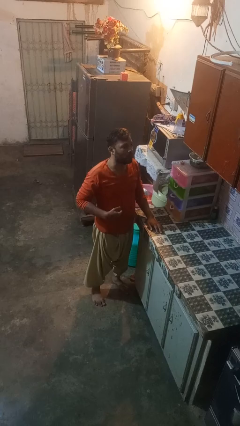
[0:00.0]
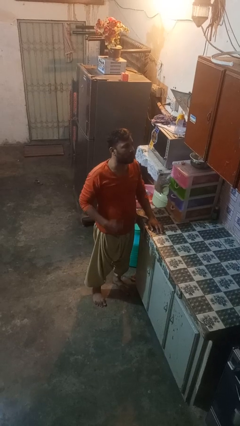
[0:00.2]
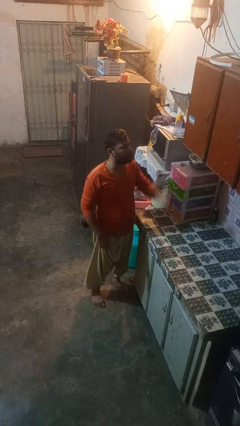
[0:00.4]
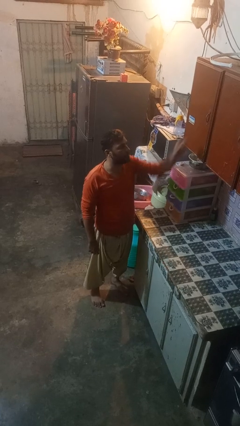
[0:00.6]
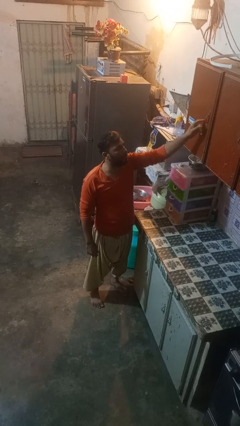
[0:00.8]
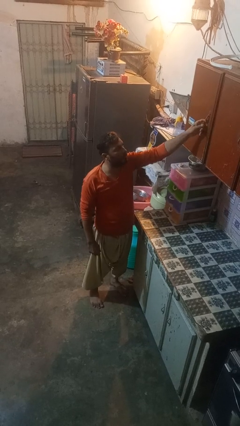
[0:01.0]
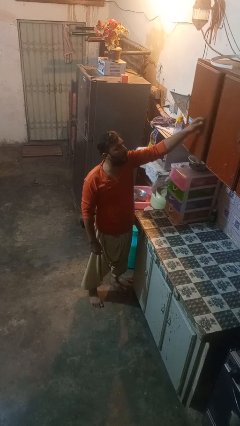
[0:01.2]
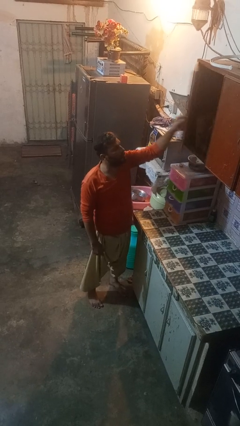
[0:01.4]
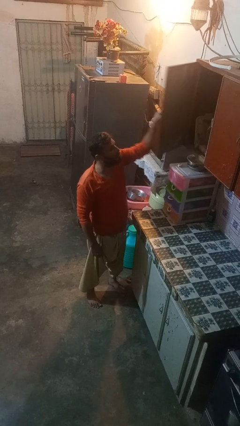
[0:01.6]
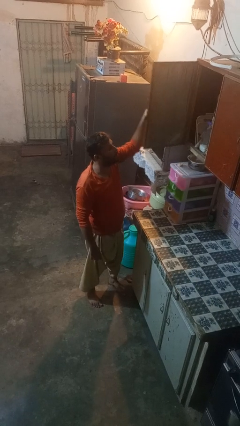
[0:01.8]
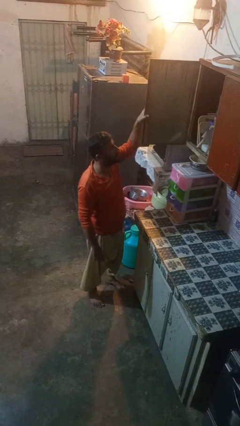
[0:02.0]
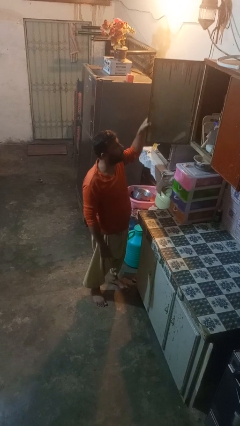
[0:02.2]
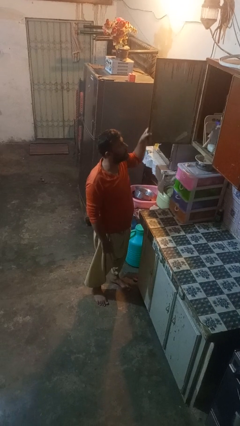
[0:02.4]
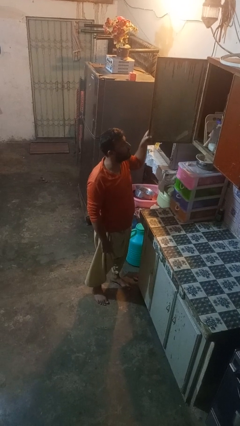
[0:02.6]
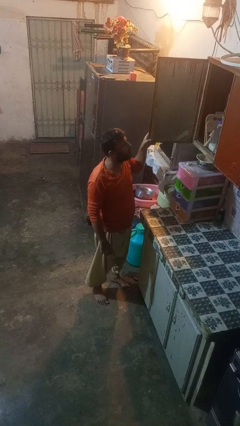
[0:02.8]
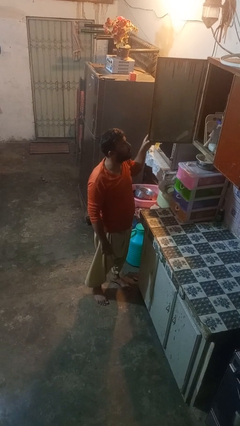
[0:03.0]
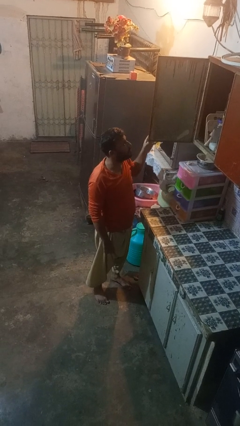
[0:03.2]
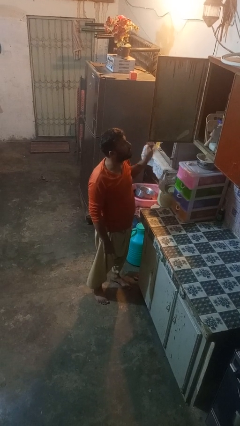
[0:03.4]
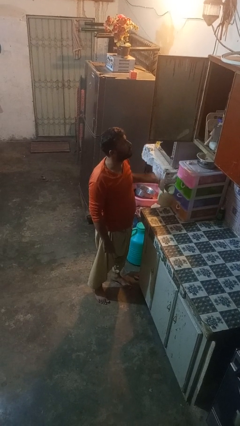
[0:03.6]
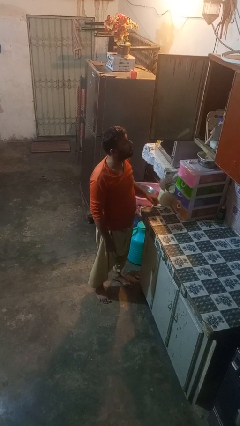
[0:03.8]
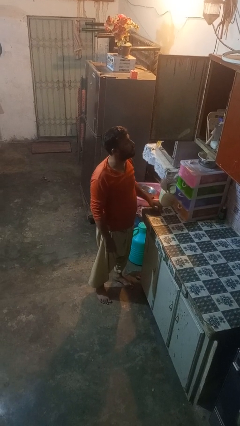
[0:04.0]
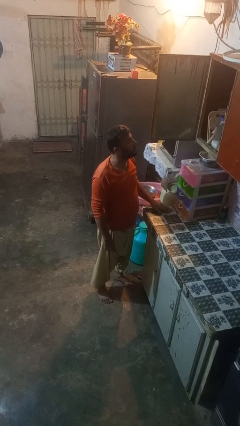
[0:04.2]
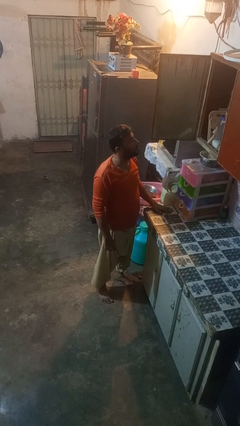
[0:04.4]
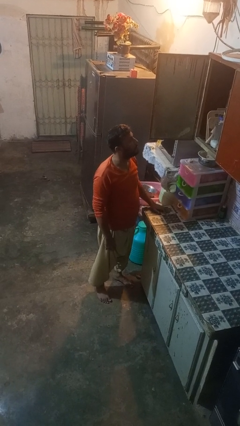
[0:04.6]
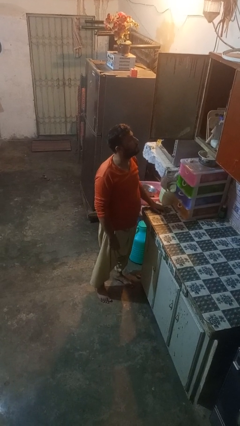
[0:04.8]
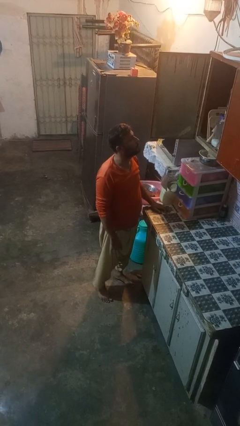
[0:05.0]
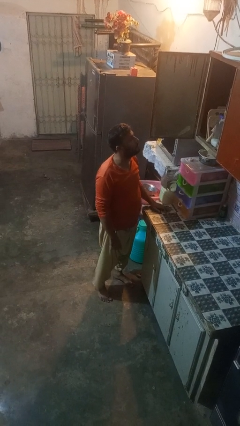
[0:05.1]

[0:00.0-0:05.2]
person opens cabinet

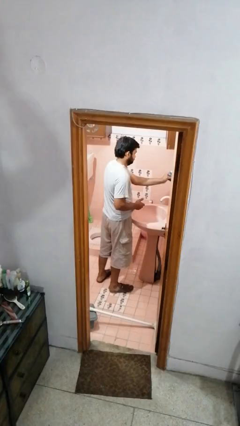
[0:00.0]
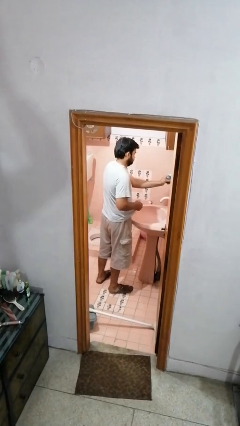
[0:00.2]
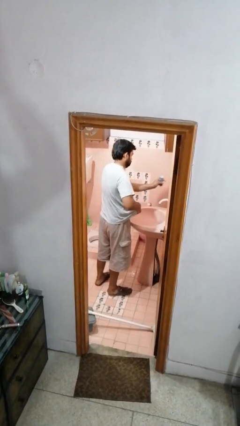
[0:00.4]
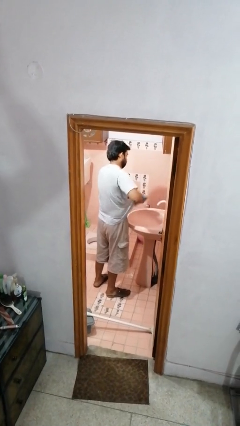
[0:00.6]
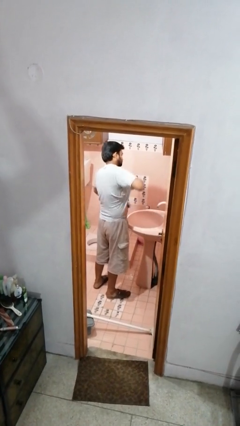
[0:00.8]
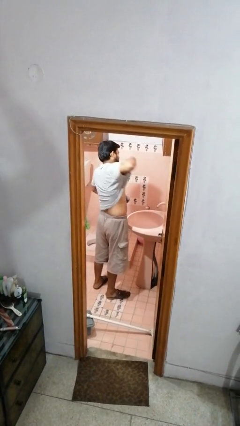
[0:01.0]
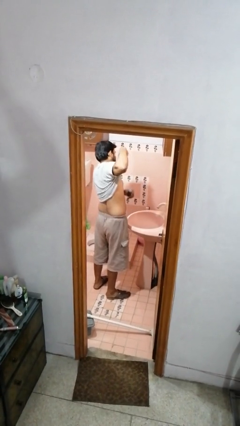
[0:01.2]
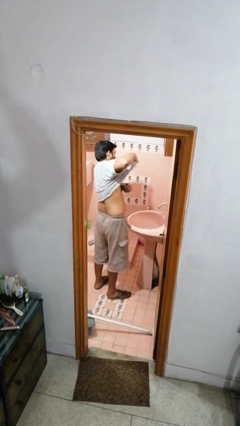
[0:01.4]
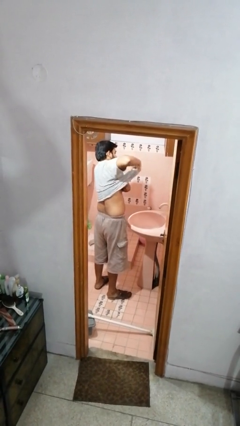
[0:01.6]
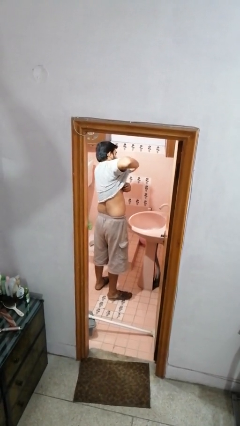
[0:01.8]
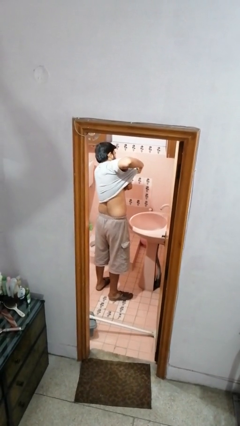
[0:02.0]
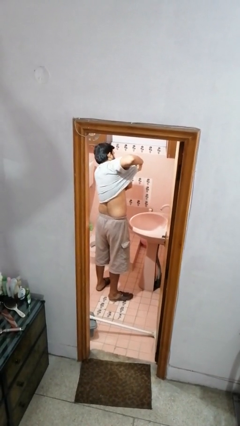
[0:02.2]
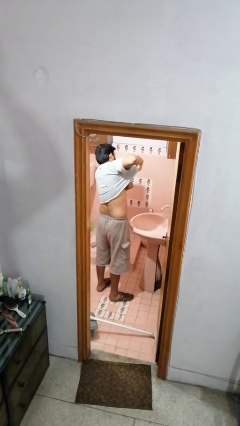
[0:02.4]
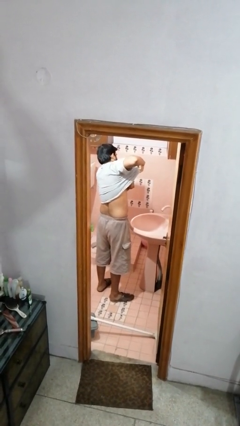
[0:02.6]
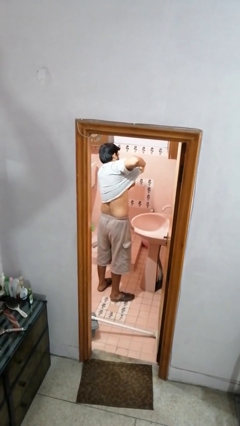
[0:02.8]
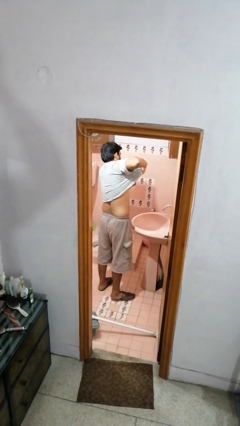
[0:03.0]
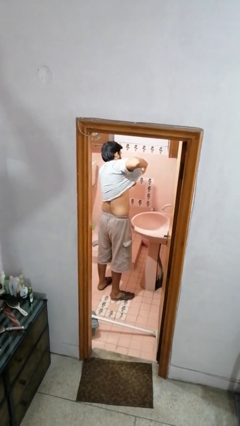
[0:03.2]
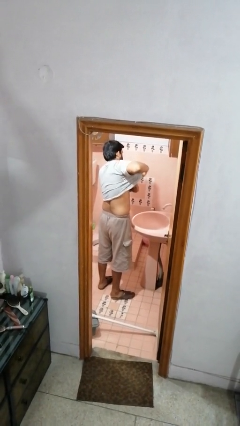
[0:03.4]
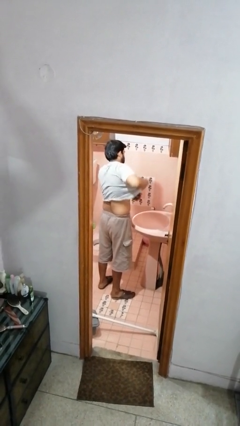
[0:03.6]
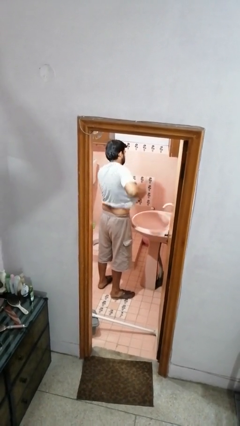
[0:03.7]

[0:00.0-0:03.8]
person applies deodorant

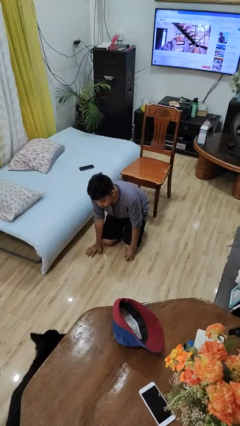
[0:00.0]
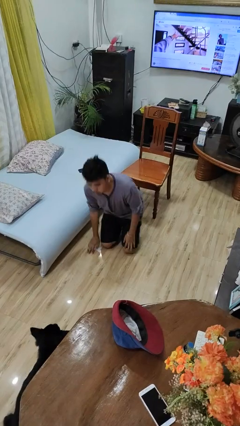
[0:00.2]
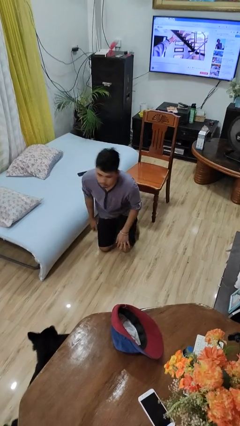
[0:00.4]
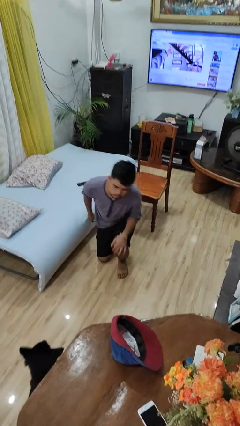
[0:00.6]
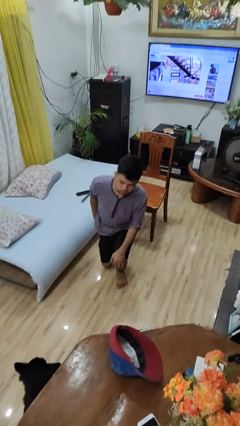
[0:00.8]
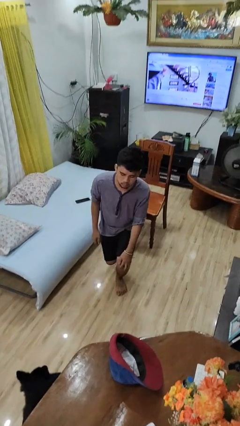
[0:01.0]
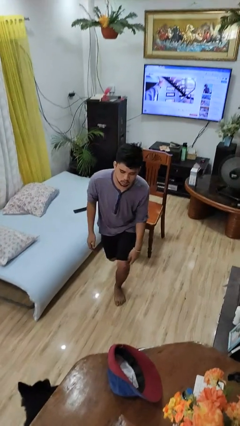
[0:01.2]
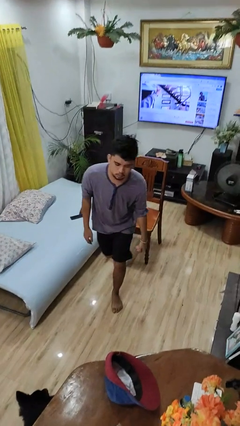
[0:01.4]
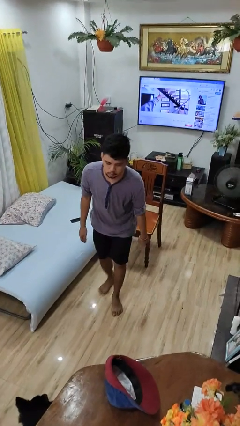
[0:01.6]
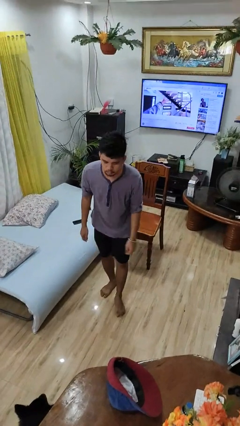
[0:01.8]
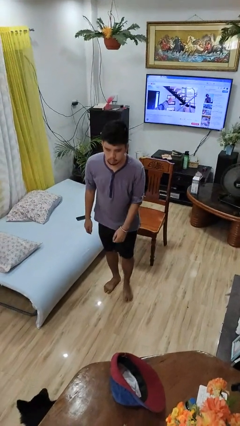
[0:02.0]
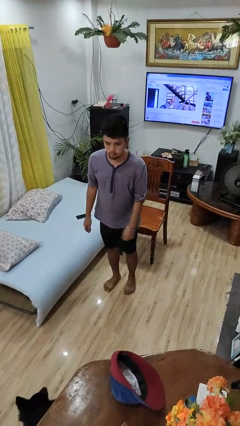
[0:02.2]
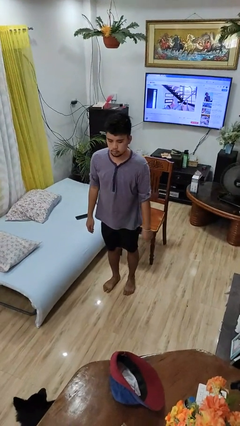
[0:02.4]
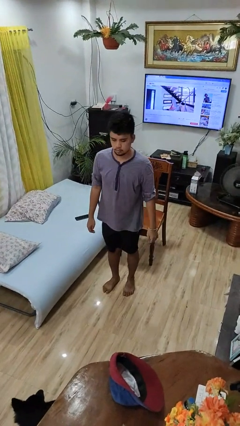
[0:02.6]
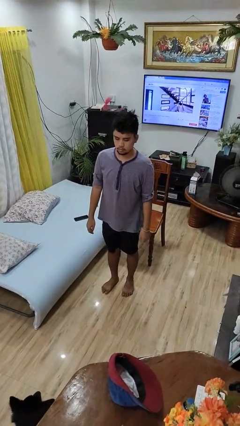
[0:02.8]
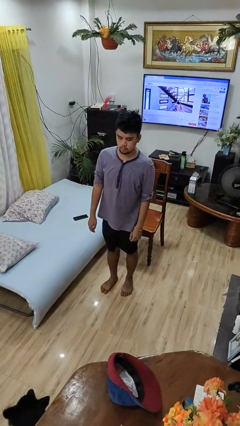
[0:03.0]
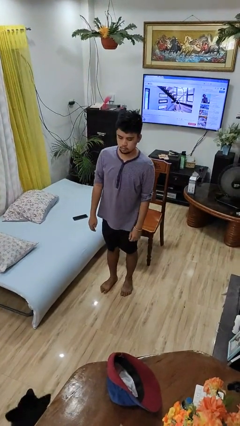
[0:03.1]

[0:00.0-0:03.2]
person stands up from floor

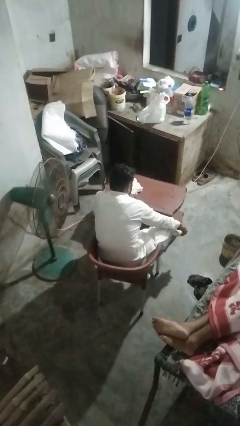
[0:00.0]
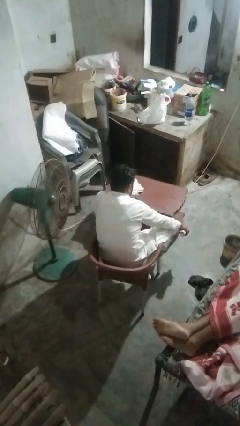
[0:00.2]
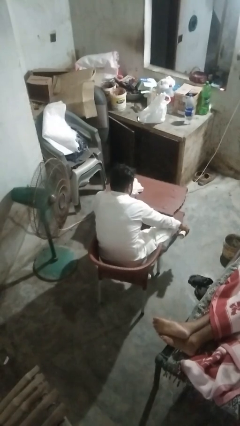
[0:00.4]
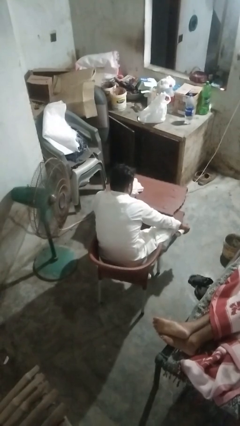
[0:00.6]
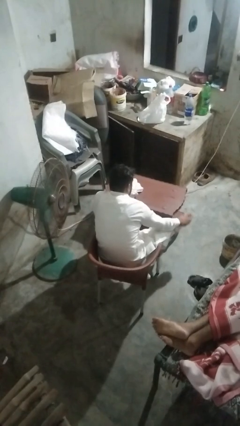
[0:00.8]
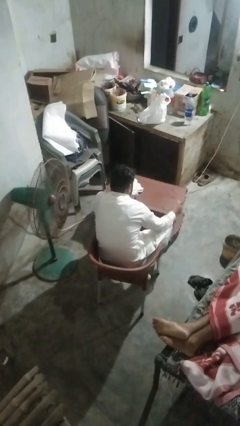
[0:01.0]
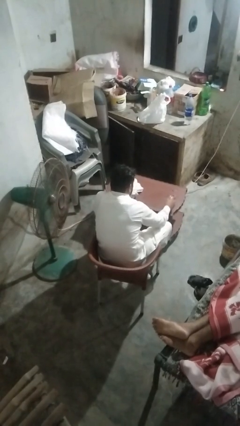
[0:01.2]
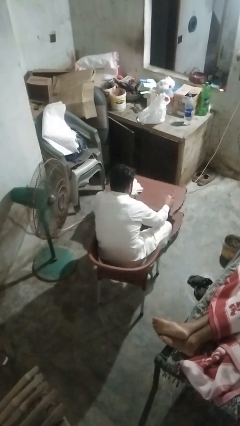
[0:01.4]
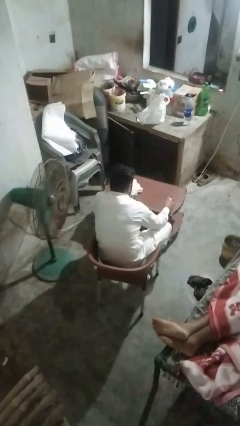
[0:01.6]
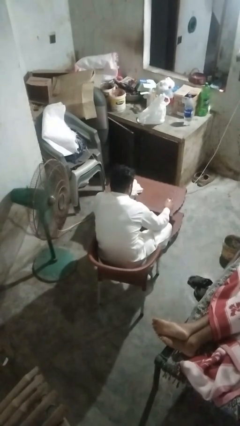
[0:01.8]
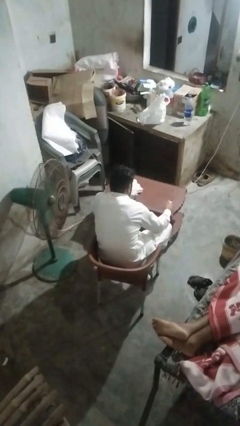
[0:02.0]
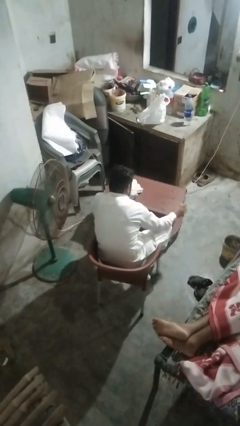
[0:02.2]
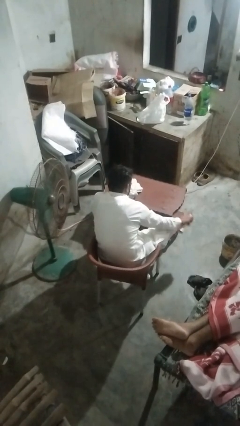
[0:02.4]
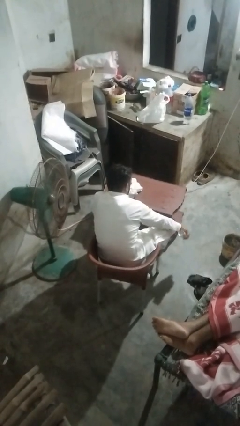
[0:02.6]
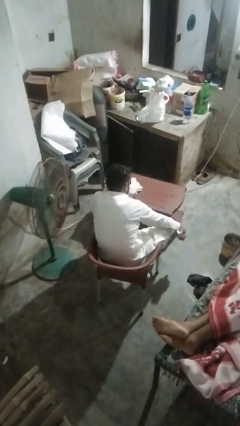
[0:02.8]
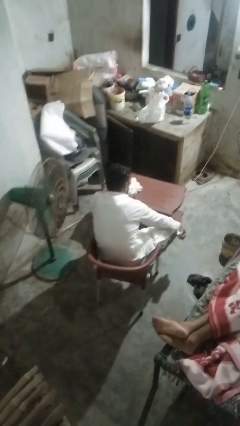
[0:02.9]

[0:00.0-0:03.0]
person sprays from bottle

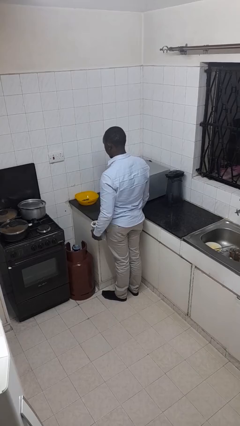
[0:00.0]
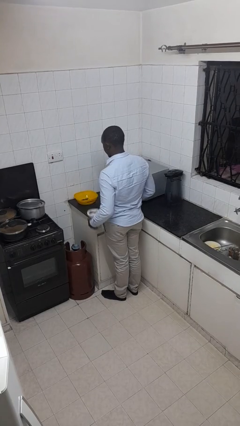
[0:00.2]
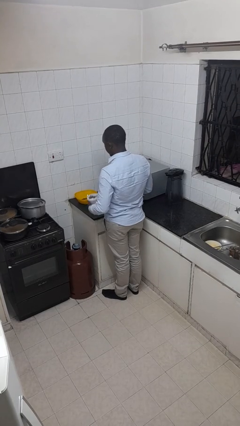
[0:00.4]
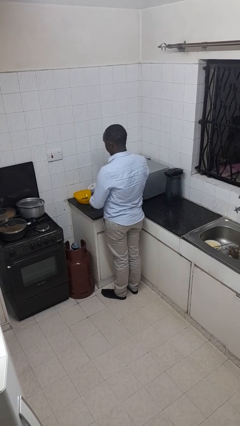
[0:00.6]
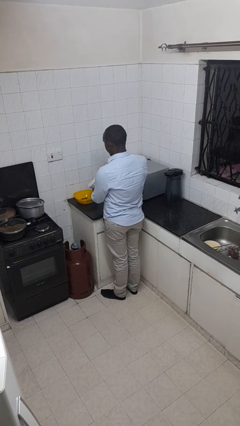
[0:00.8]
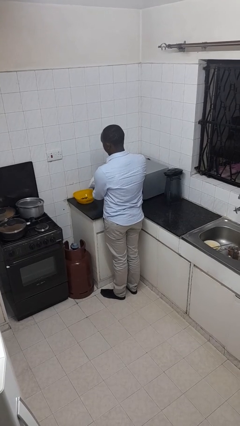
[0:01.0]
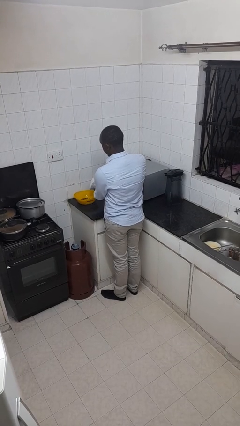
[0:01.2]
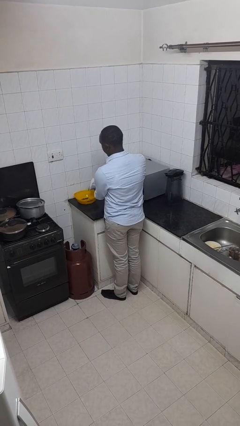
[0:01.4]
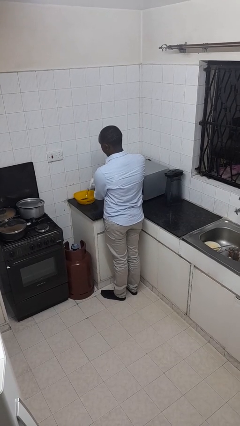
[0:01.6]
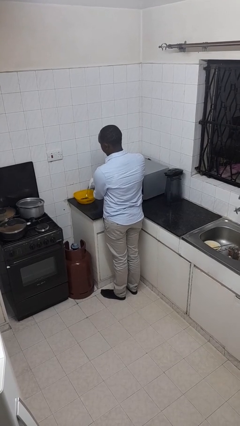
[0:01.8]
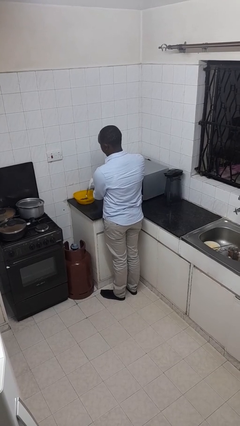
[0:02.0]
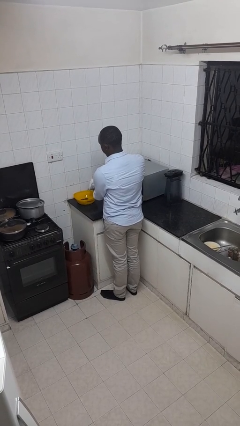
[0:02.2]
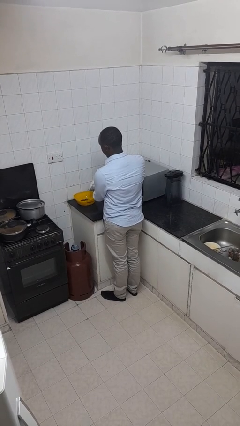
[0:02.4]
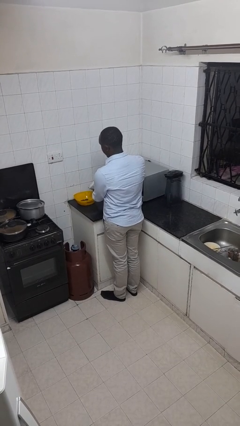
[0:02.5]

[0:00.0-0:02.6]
person pours into bowl
